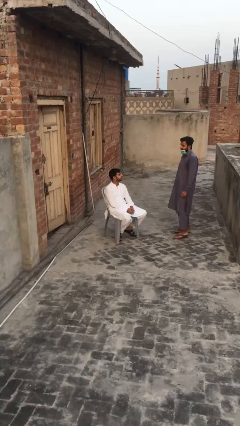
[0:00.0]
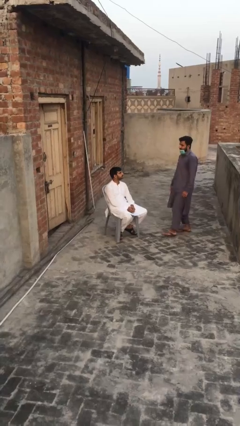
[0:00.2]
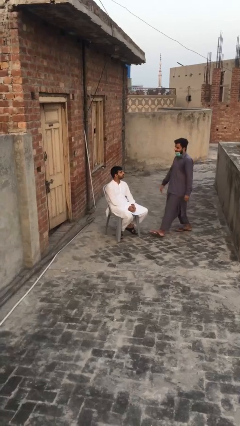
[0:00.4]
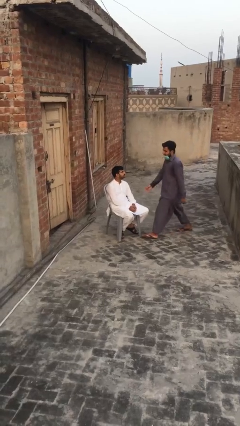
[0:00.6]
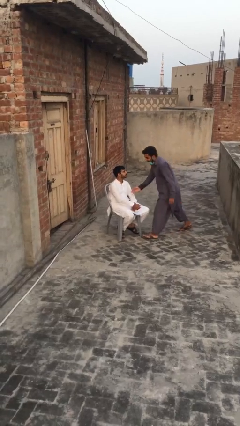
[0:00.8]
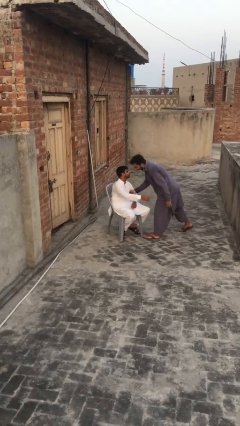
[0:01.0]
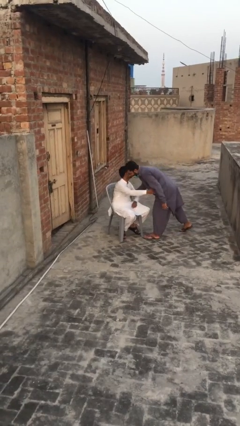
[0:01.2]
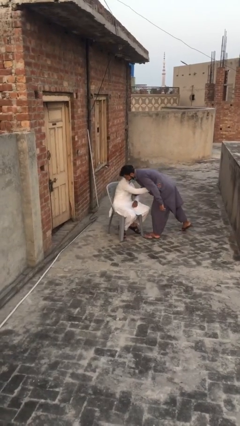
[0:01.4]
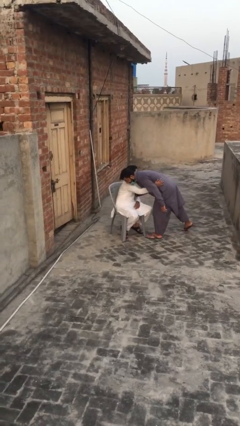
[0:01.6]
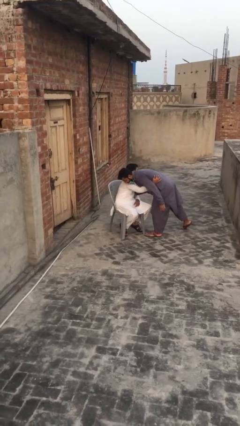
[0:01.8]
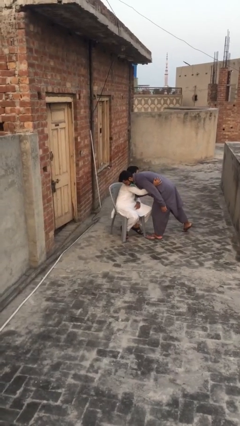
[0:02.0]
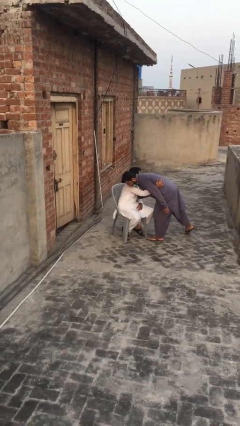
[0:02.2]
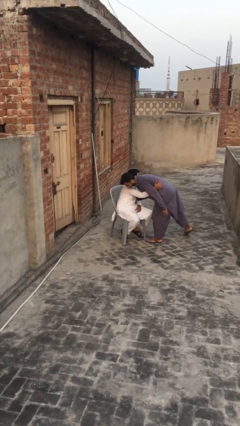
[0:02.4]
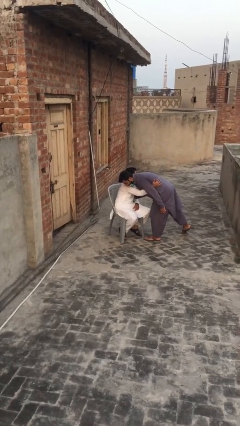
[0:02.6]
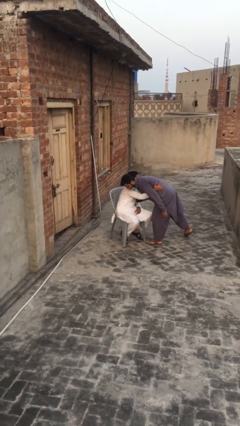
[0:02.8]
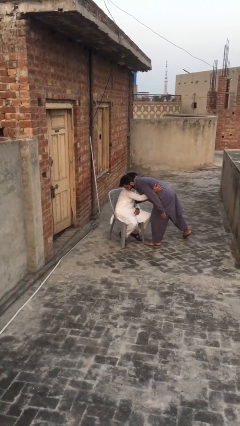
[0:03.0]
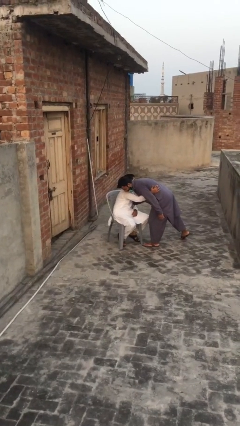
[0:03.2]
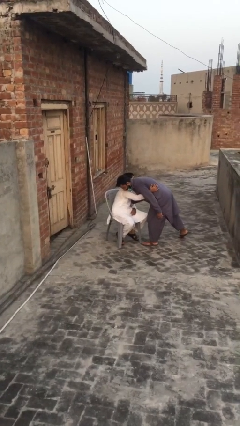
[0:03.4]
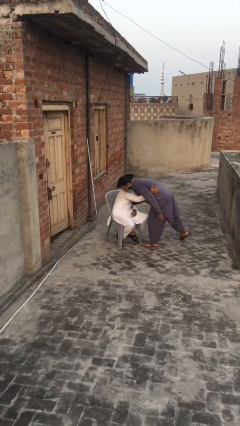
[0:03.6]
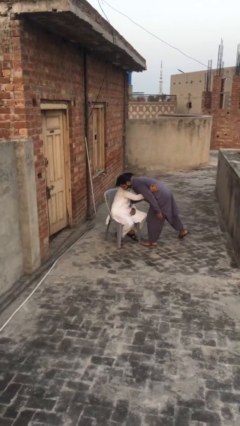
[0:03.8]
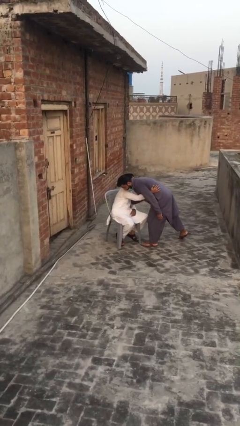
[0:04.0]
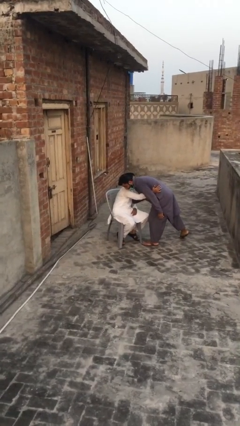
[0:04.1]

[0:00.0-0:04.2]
person embraces person

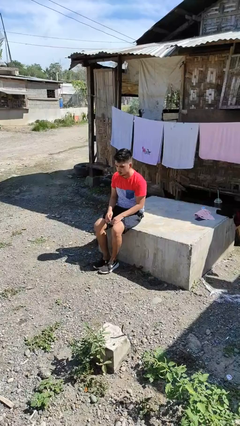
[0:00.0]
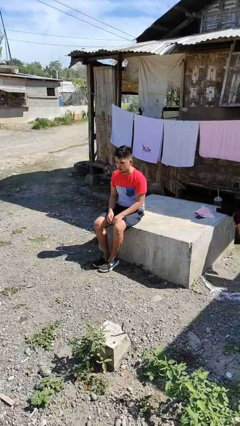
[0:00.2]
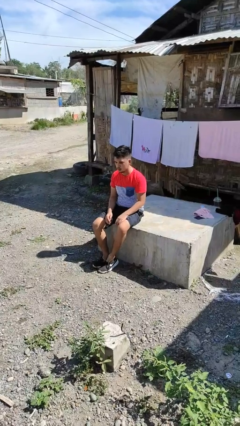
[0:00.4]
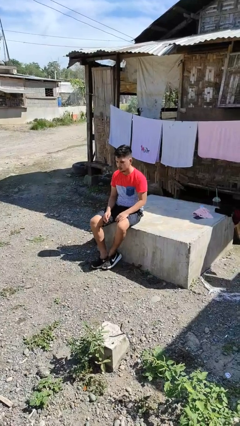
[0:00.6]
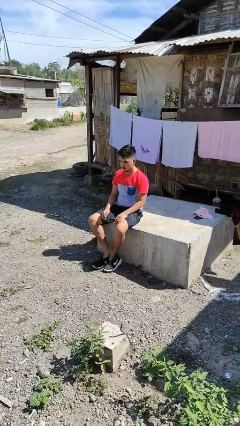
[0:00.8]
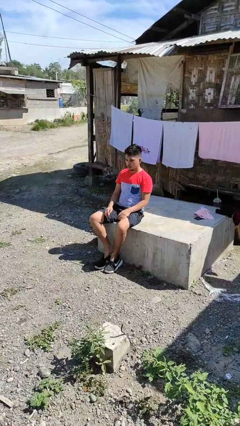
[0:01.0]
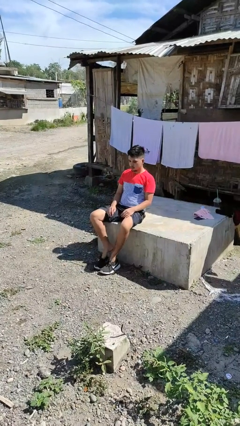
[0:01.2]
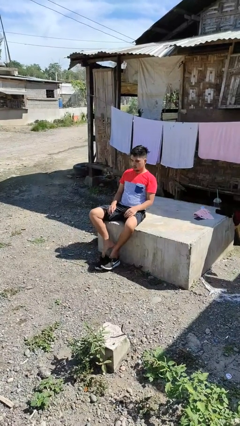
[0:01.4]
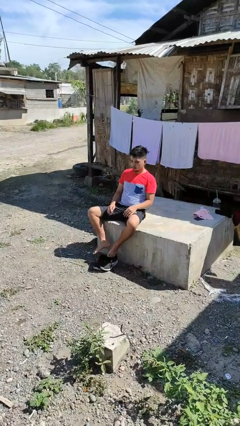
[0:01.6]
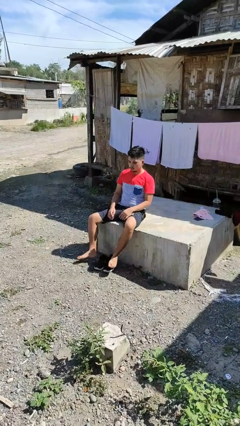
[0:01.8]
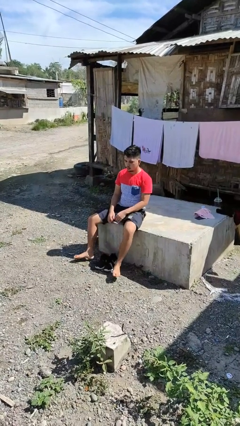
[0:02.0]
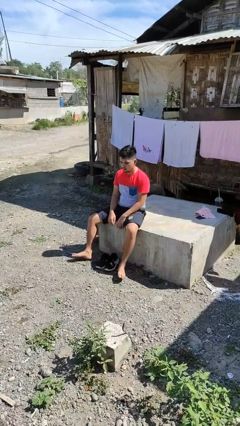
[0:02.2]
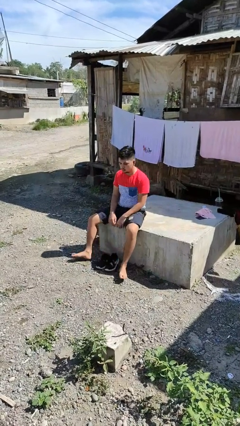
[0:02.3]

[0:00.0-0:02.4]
person takes off shoes

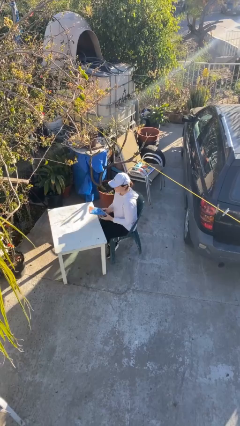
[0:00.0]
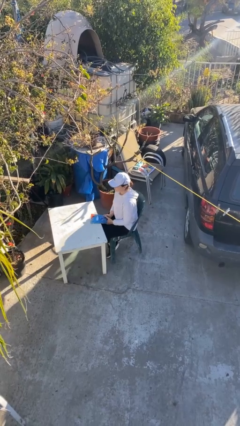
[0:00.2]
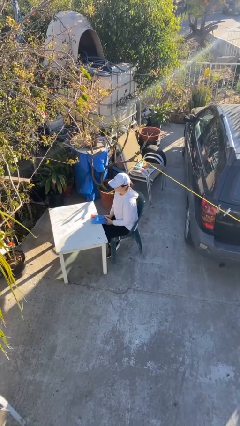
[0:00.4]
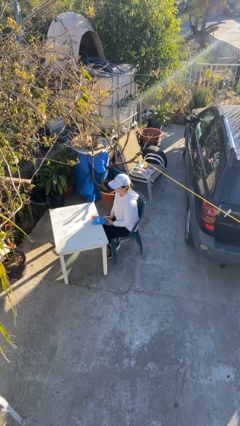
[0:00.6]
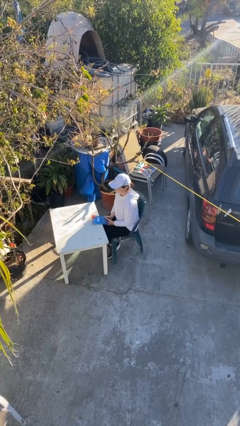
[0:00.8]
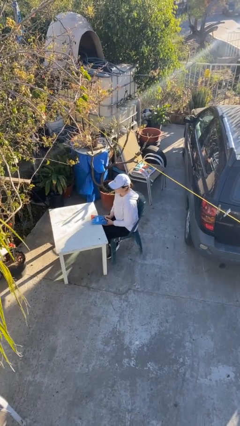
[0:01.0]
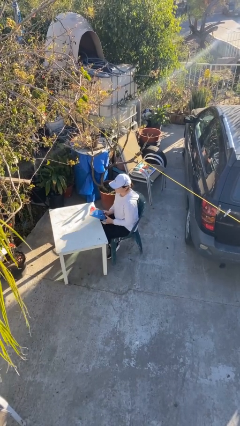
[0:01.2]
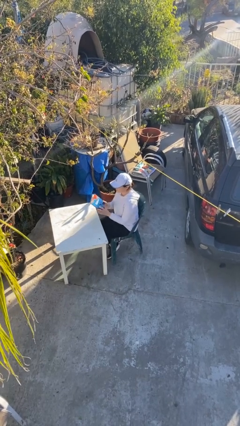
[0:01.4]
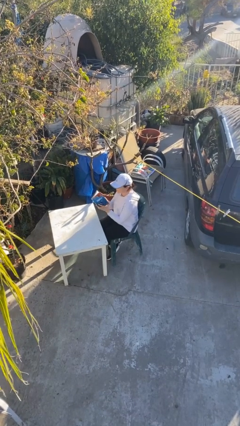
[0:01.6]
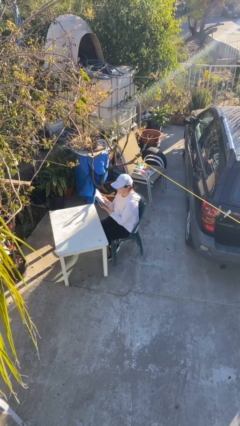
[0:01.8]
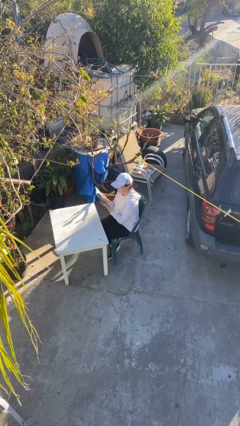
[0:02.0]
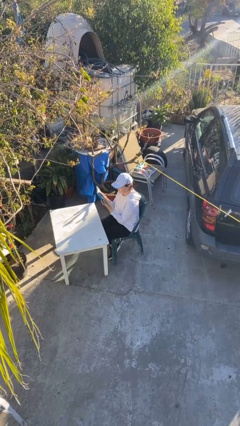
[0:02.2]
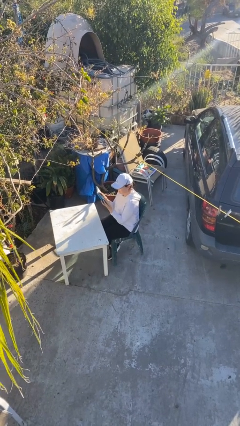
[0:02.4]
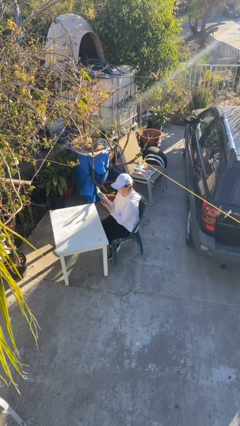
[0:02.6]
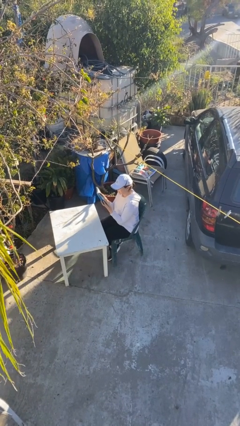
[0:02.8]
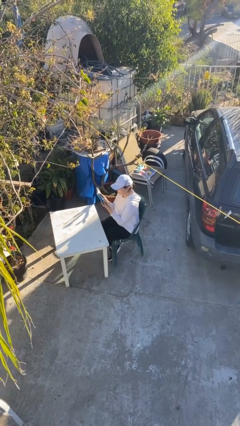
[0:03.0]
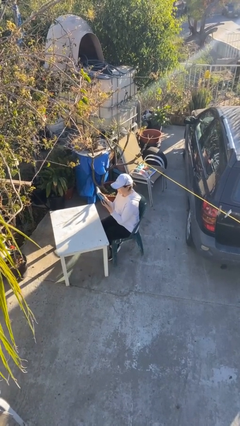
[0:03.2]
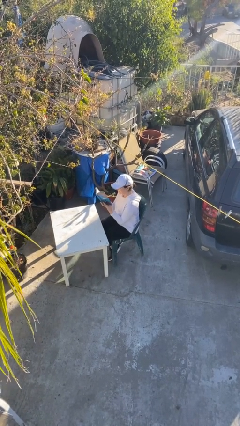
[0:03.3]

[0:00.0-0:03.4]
person reads document

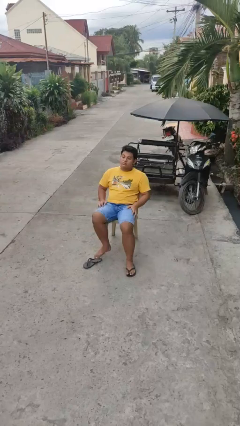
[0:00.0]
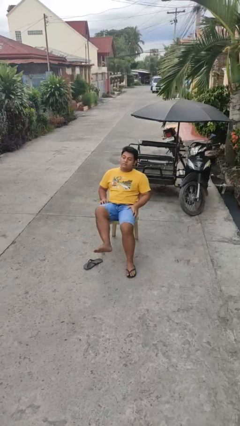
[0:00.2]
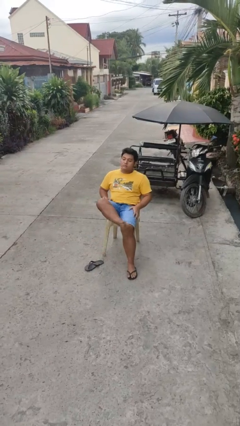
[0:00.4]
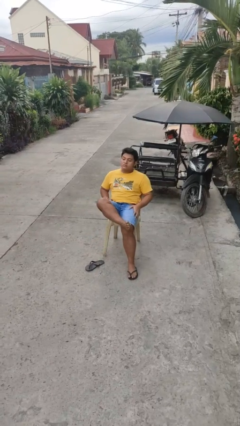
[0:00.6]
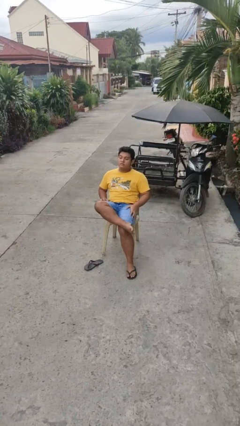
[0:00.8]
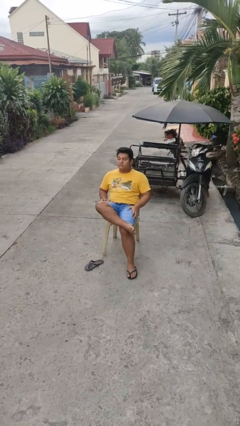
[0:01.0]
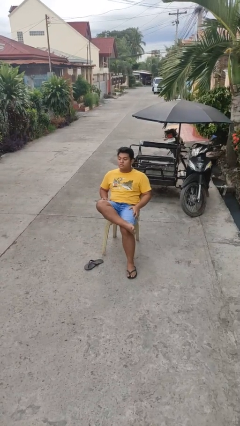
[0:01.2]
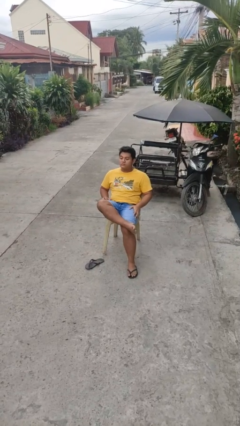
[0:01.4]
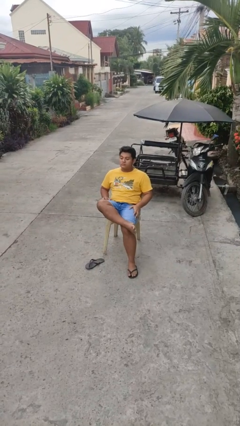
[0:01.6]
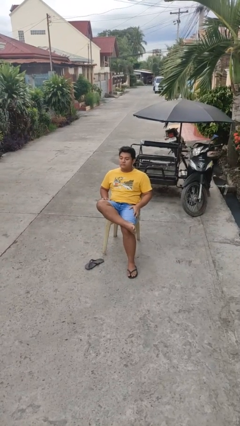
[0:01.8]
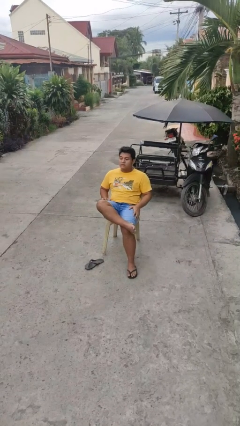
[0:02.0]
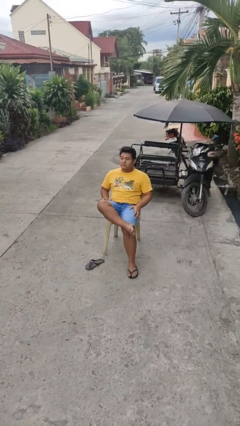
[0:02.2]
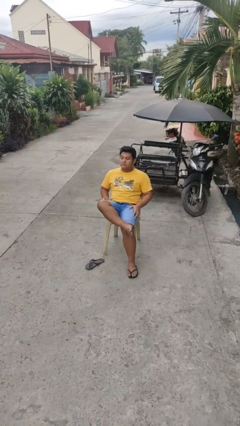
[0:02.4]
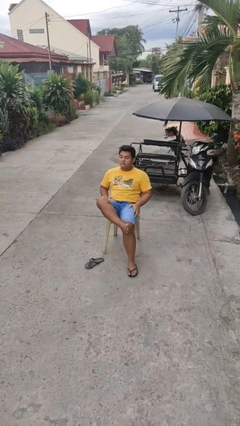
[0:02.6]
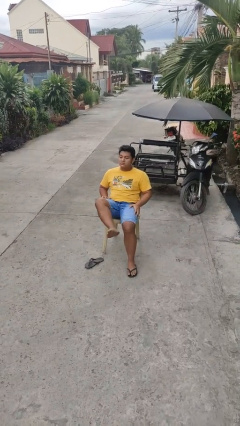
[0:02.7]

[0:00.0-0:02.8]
person crosses legs

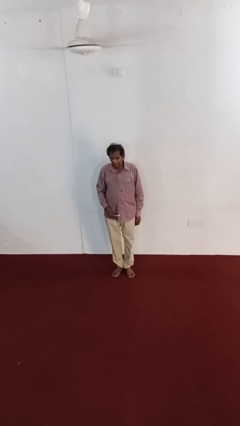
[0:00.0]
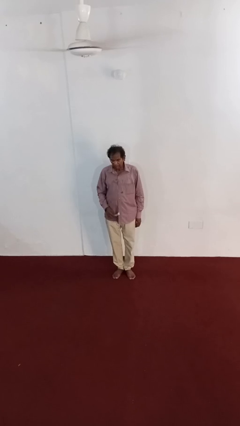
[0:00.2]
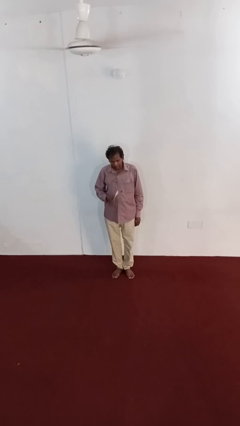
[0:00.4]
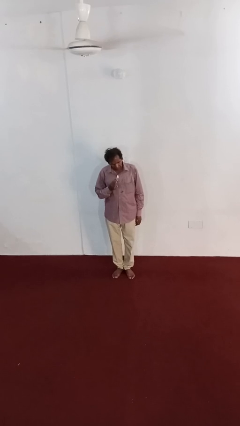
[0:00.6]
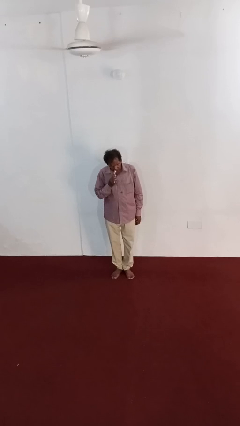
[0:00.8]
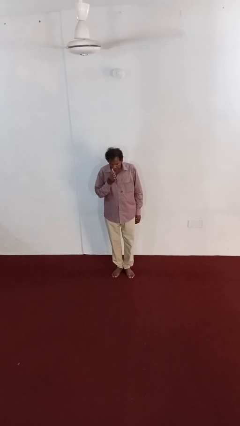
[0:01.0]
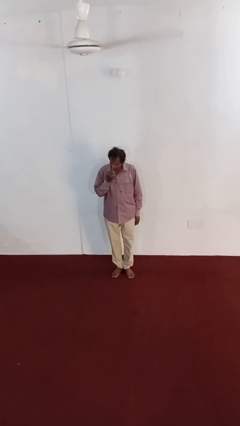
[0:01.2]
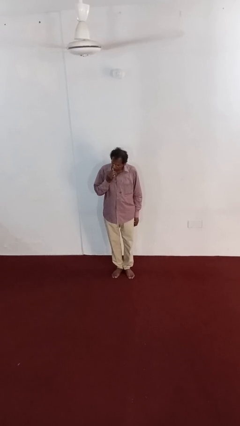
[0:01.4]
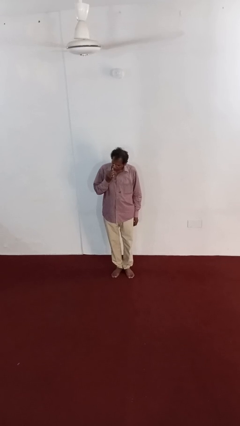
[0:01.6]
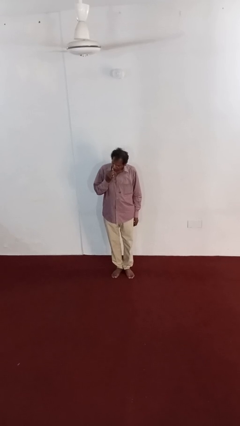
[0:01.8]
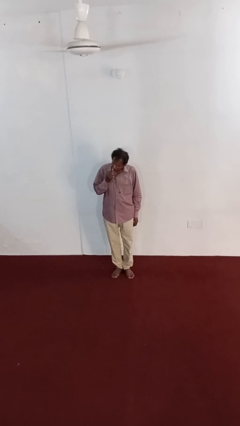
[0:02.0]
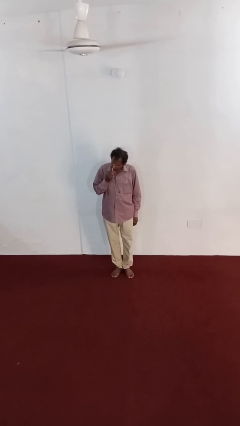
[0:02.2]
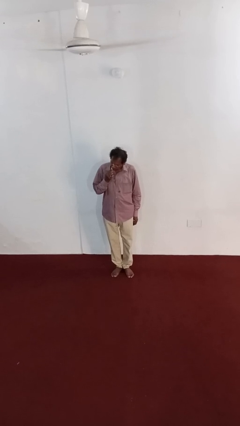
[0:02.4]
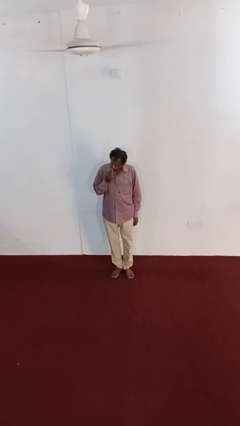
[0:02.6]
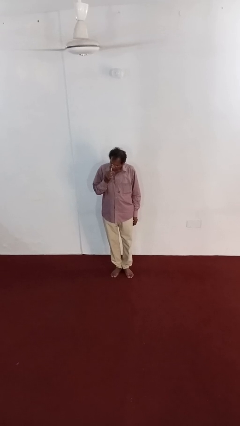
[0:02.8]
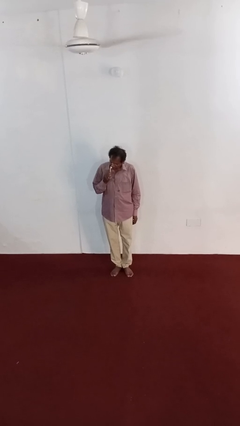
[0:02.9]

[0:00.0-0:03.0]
person brushes teeth

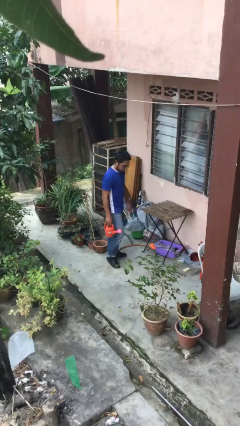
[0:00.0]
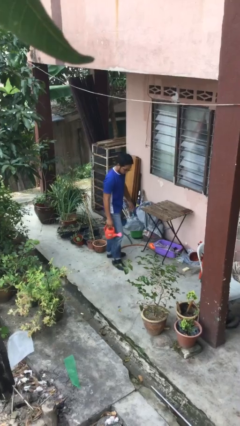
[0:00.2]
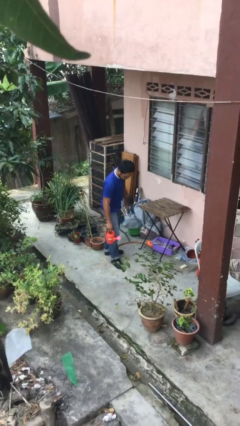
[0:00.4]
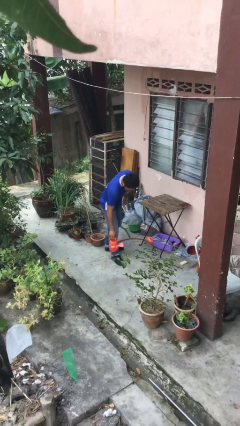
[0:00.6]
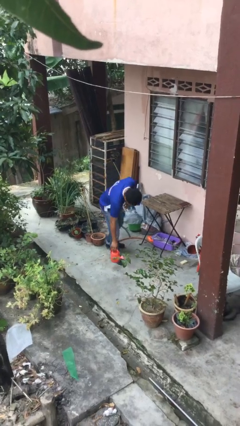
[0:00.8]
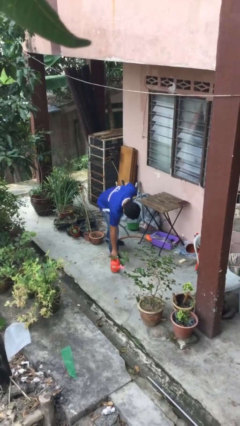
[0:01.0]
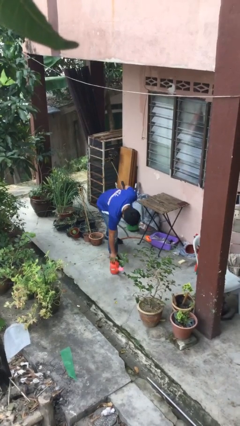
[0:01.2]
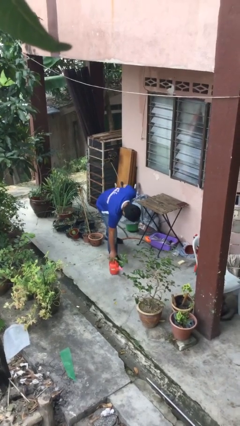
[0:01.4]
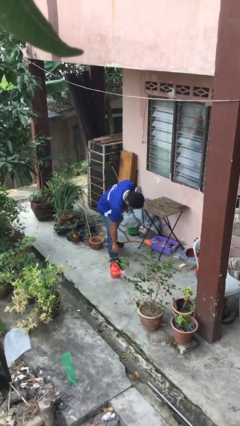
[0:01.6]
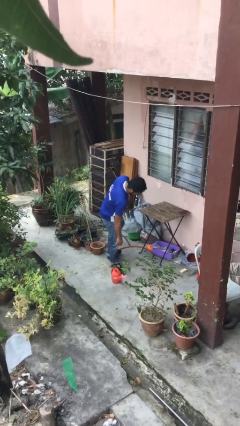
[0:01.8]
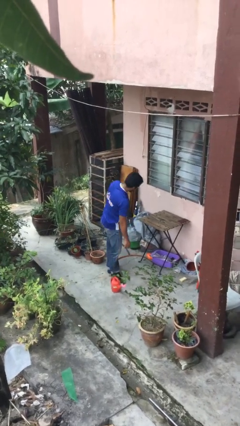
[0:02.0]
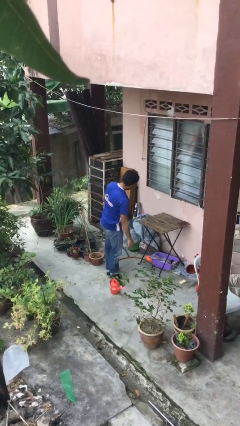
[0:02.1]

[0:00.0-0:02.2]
person puts down object on floor
